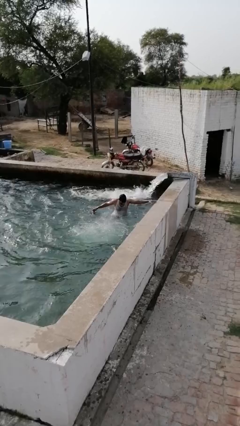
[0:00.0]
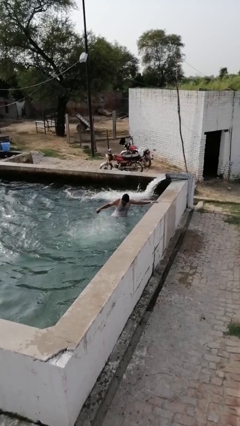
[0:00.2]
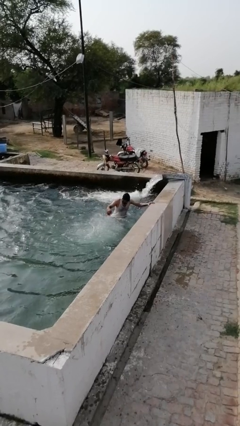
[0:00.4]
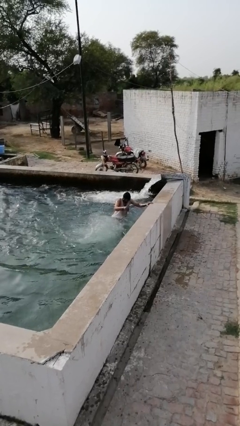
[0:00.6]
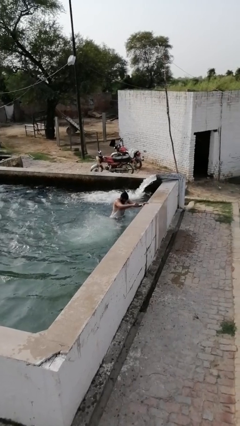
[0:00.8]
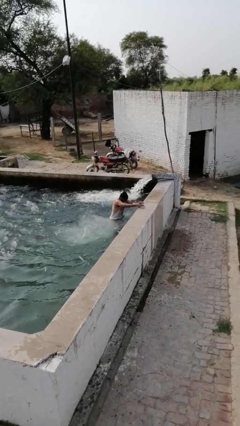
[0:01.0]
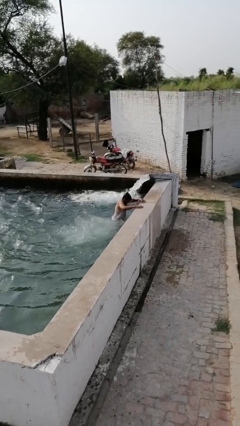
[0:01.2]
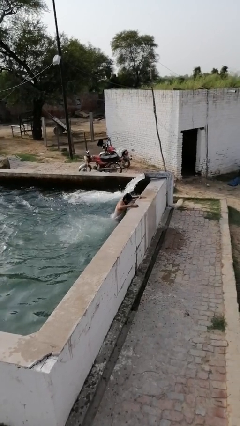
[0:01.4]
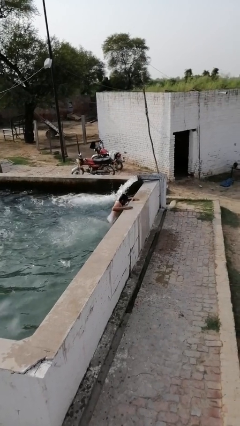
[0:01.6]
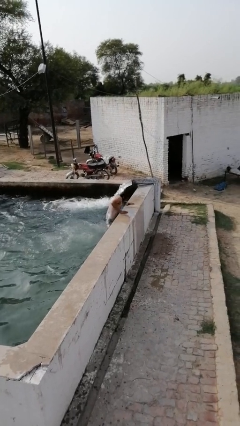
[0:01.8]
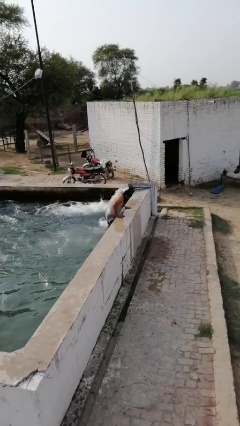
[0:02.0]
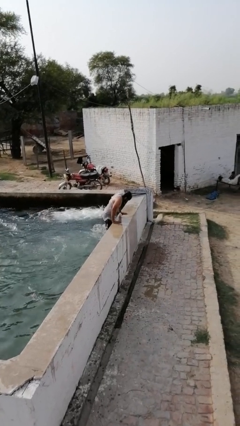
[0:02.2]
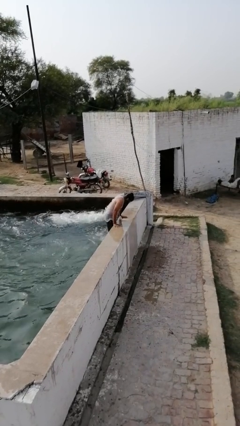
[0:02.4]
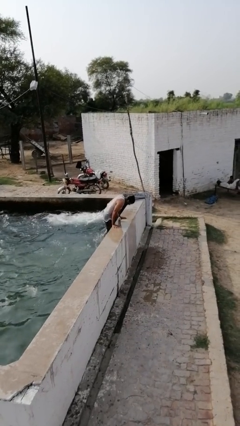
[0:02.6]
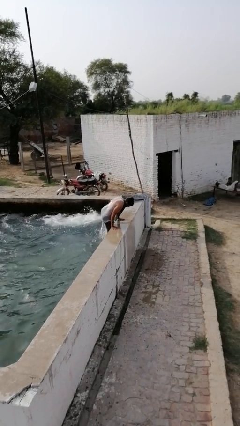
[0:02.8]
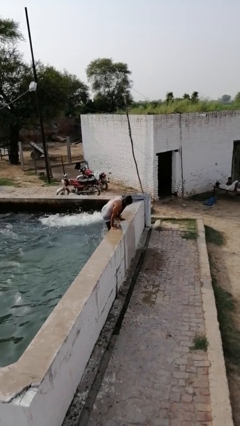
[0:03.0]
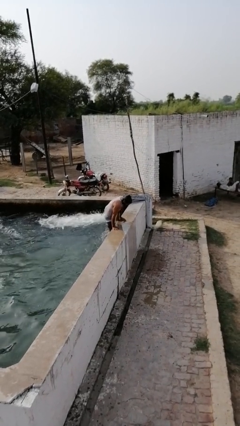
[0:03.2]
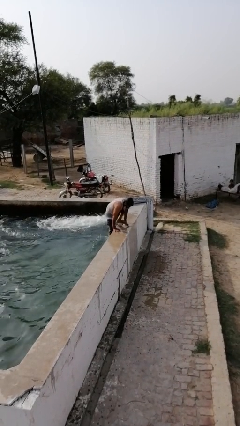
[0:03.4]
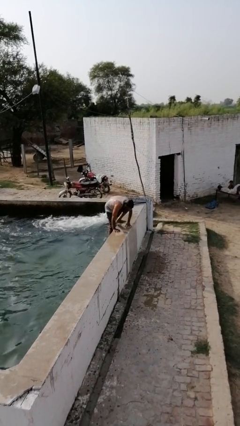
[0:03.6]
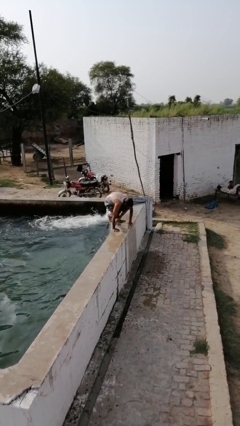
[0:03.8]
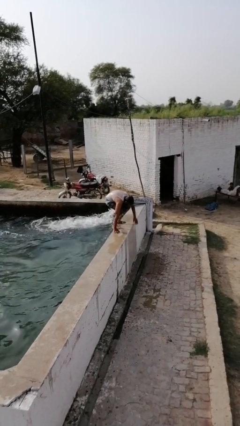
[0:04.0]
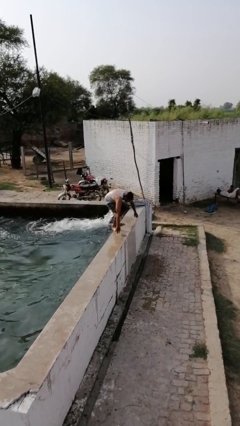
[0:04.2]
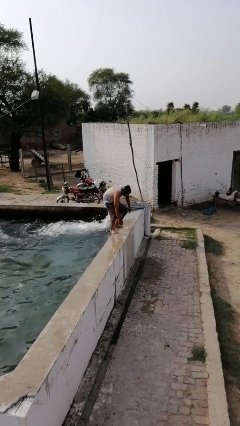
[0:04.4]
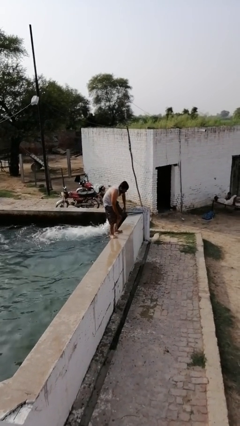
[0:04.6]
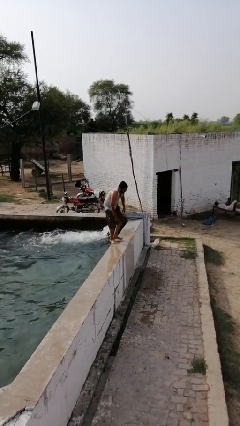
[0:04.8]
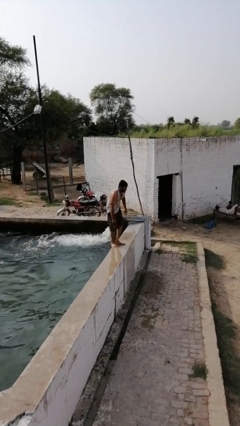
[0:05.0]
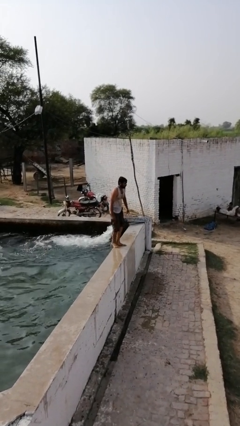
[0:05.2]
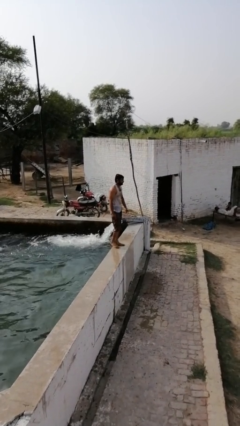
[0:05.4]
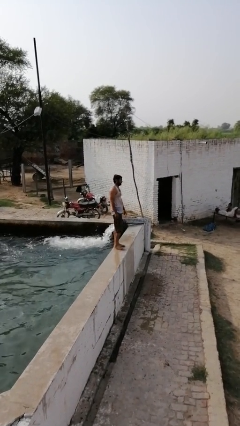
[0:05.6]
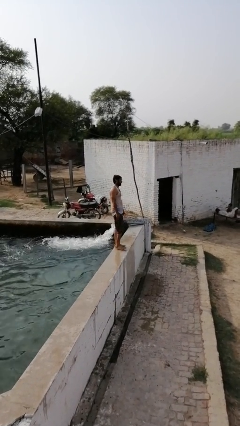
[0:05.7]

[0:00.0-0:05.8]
person exits pool

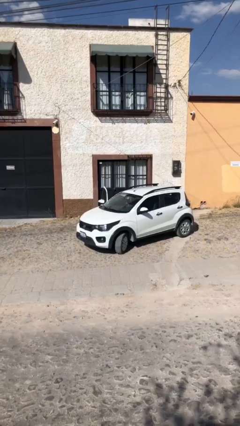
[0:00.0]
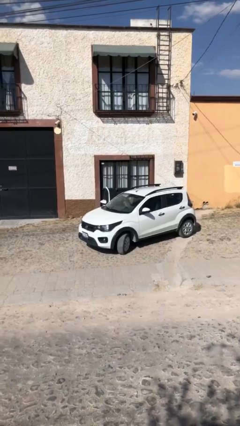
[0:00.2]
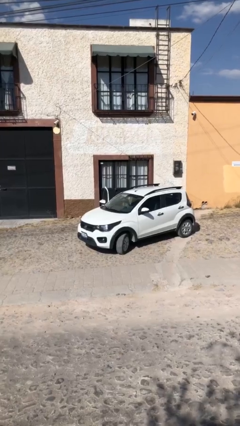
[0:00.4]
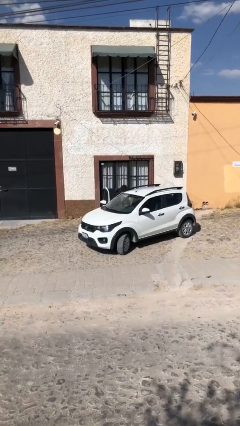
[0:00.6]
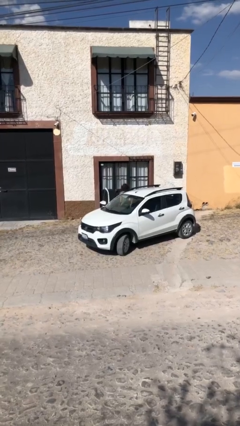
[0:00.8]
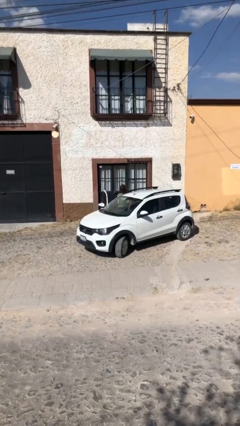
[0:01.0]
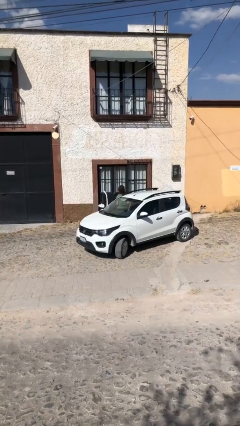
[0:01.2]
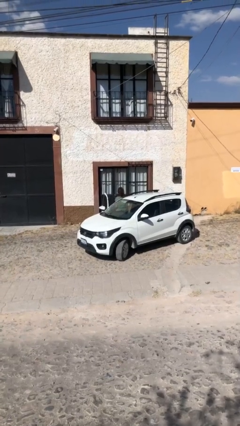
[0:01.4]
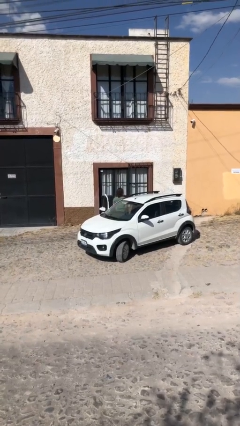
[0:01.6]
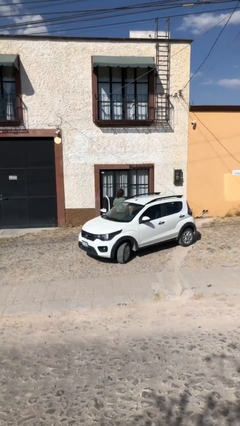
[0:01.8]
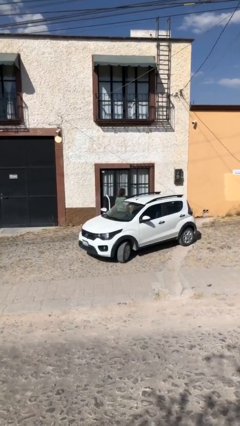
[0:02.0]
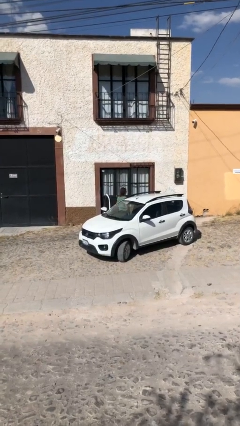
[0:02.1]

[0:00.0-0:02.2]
person exits car

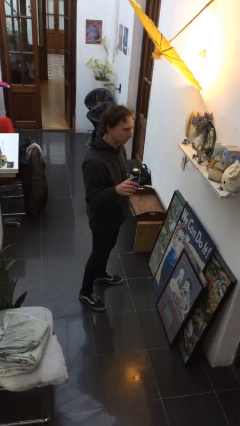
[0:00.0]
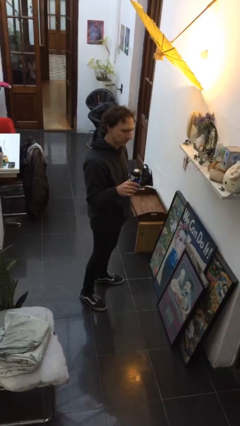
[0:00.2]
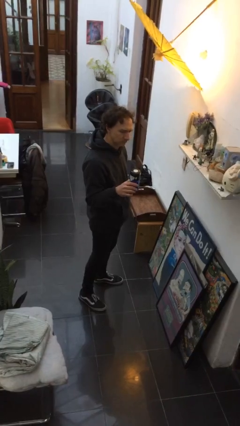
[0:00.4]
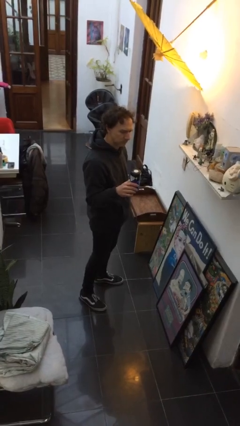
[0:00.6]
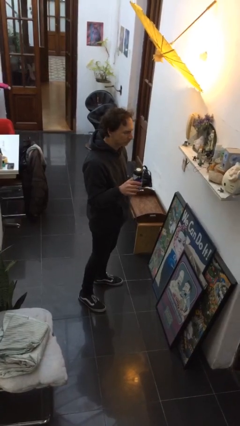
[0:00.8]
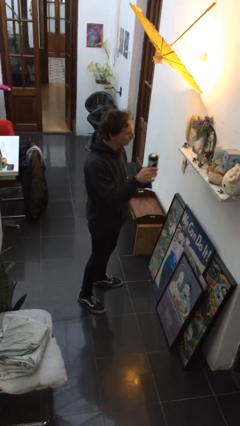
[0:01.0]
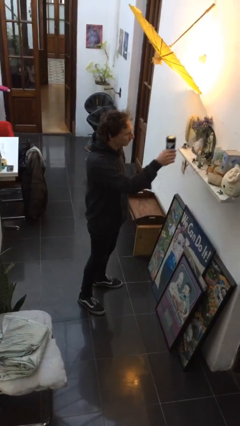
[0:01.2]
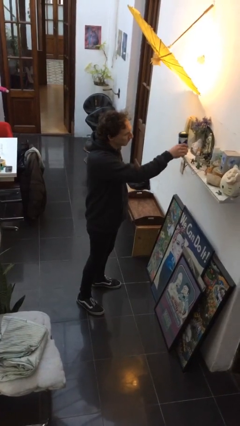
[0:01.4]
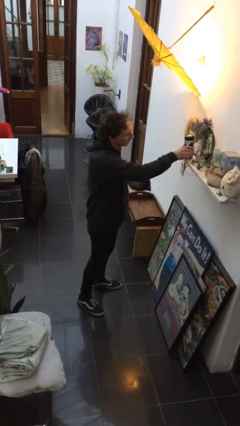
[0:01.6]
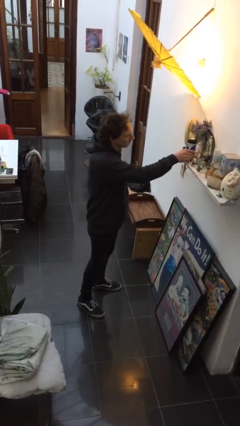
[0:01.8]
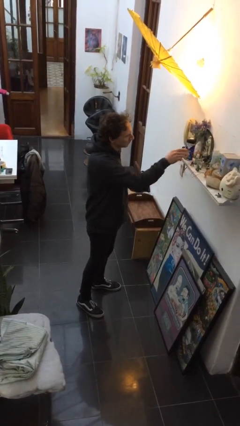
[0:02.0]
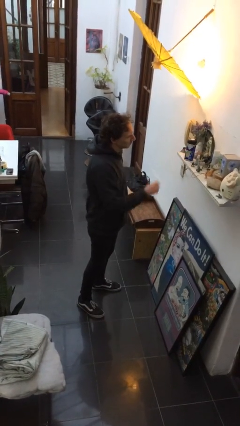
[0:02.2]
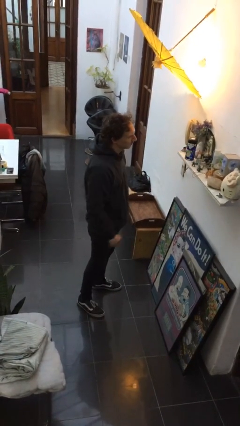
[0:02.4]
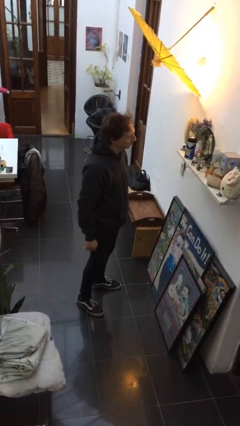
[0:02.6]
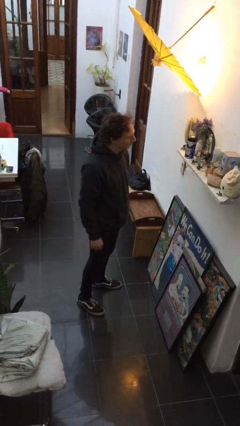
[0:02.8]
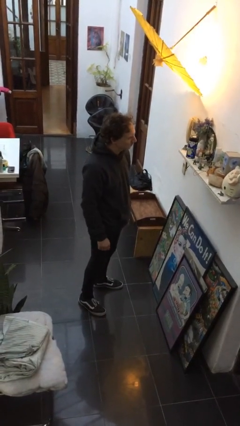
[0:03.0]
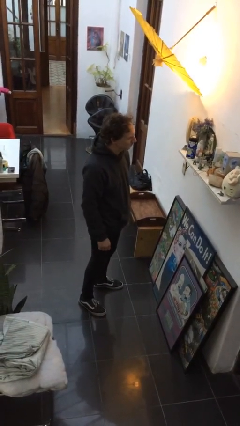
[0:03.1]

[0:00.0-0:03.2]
person puts down object on shelf

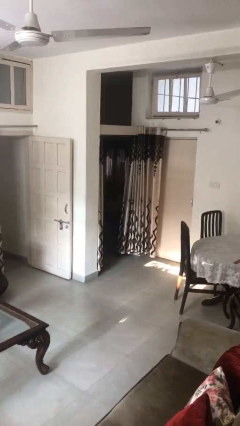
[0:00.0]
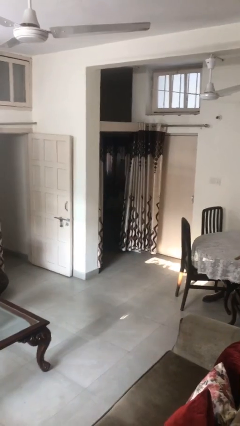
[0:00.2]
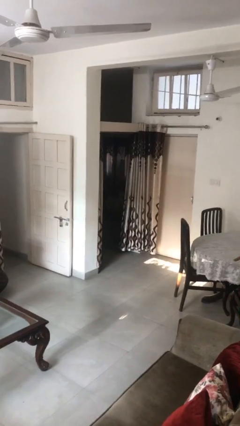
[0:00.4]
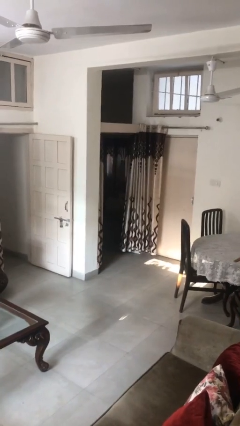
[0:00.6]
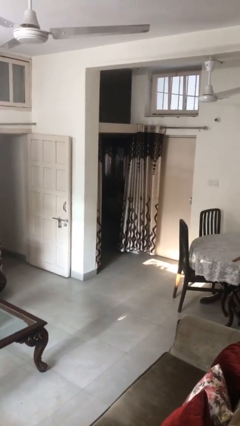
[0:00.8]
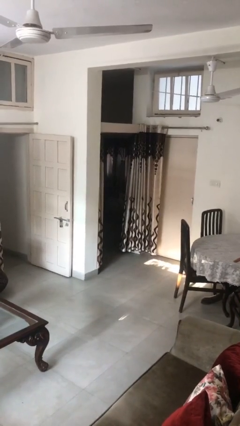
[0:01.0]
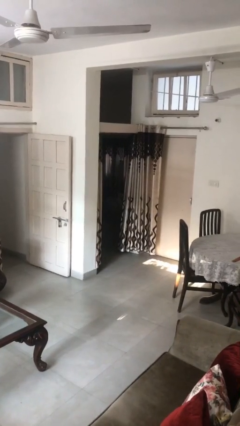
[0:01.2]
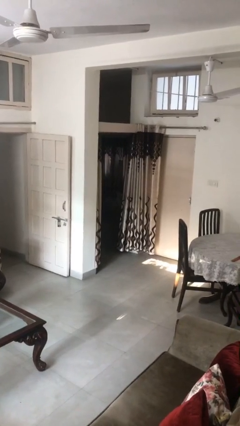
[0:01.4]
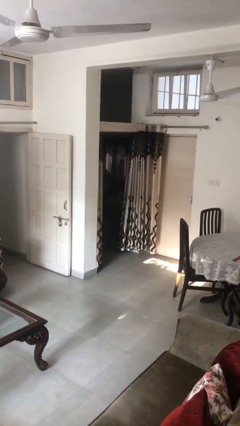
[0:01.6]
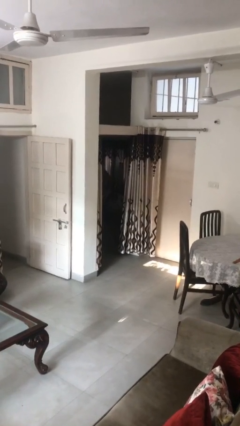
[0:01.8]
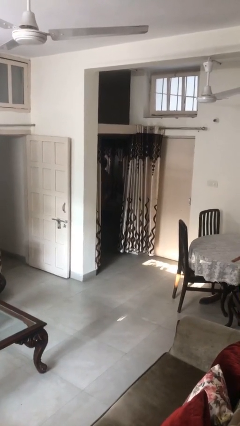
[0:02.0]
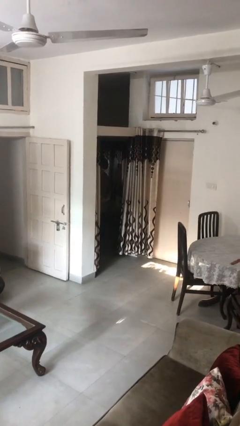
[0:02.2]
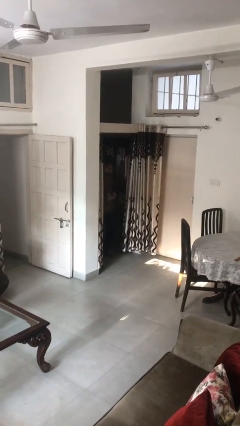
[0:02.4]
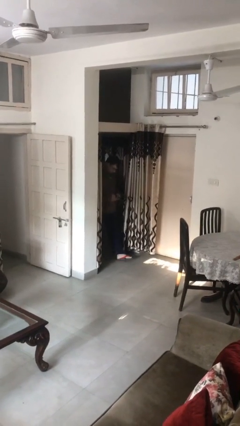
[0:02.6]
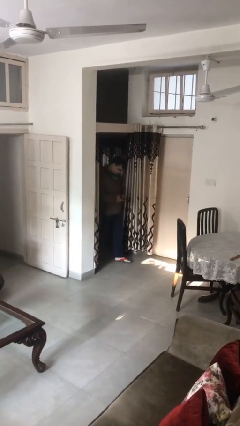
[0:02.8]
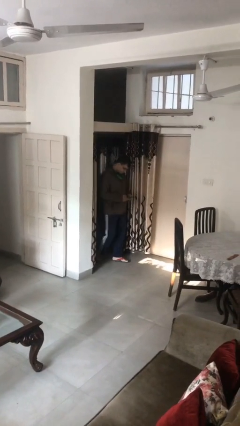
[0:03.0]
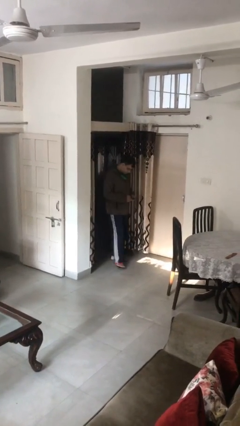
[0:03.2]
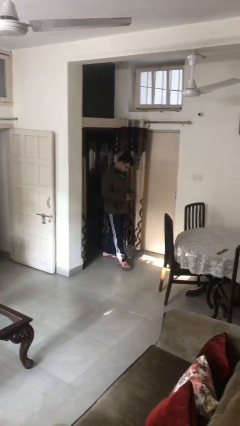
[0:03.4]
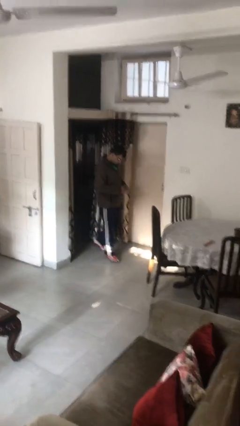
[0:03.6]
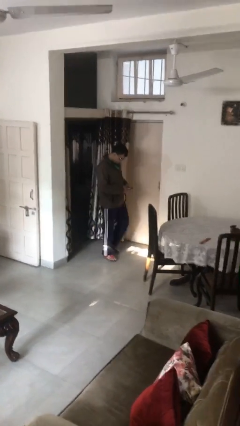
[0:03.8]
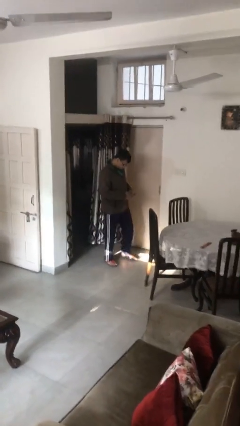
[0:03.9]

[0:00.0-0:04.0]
person enters scene through structure

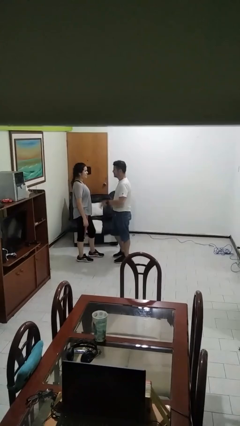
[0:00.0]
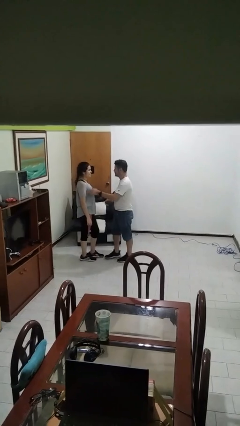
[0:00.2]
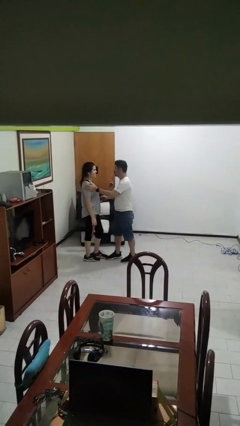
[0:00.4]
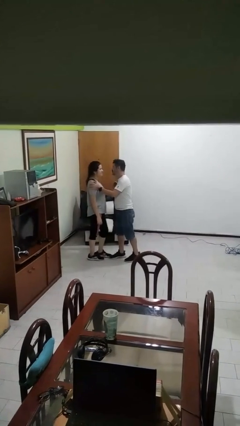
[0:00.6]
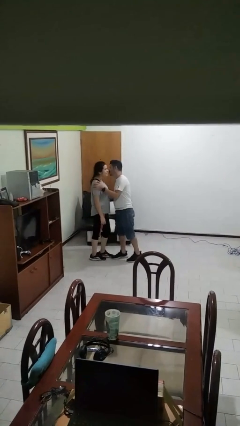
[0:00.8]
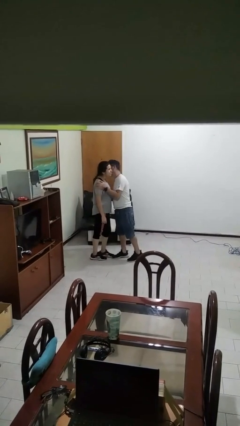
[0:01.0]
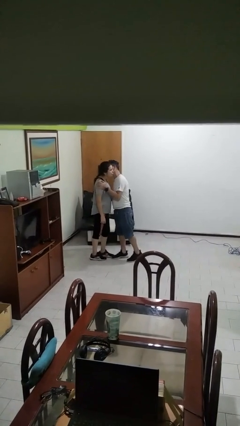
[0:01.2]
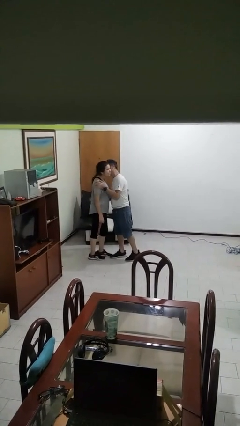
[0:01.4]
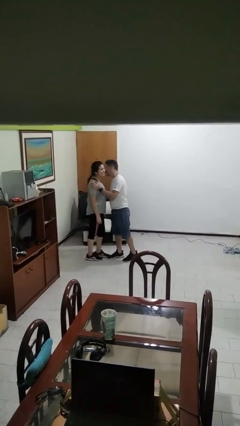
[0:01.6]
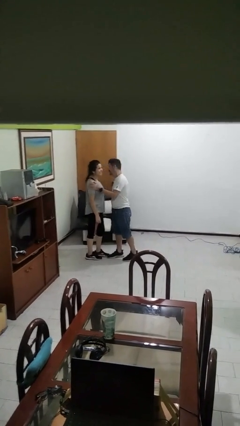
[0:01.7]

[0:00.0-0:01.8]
person kisses cheek of person

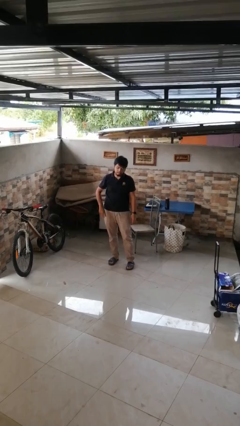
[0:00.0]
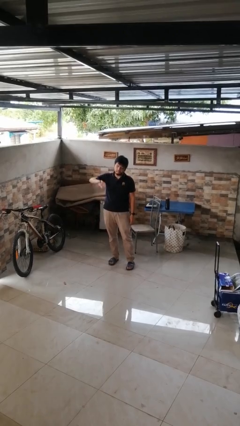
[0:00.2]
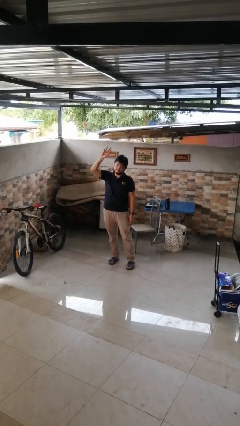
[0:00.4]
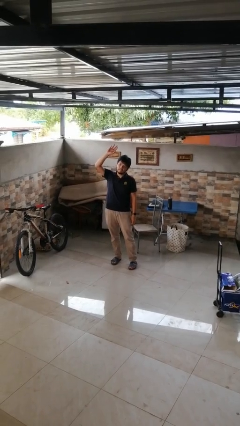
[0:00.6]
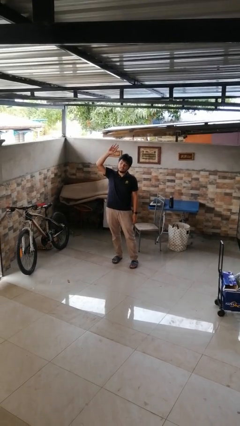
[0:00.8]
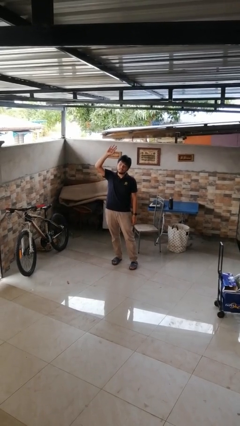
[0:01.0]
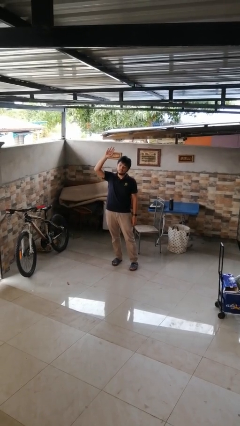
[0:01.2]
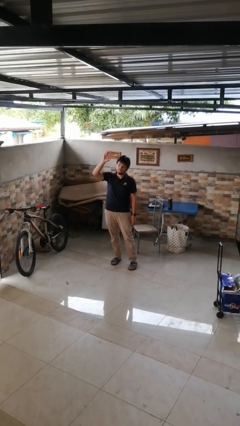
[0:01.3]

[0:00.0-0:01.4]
person gestures swipe up
